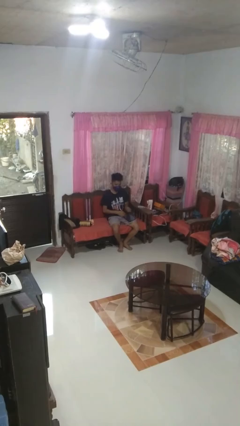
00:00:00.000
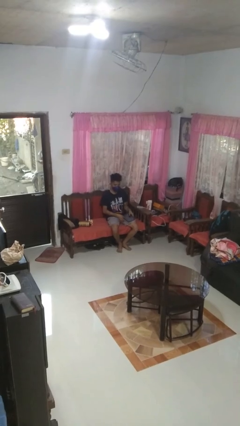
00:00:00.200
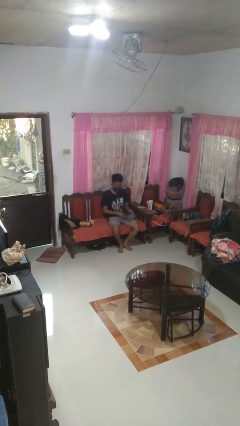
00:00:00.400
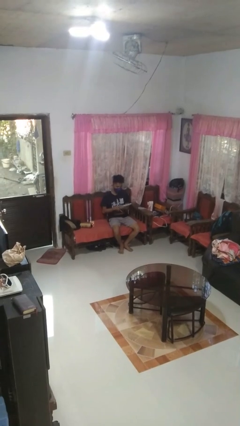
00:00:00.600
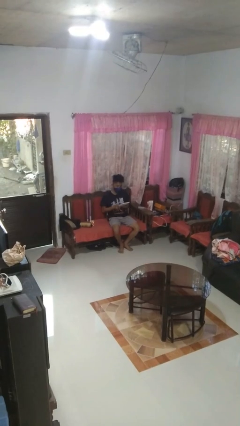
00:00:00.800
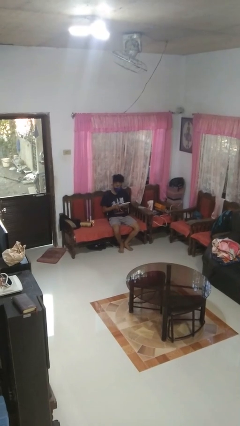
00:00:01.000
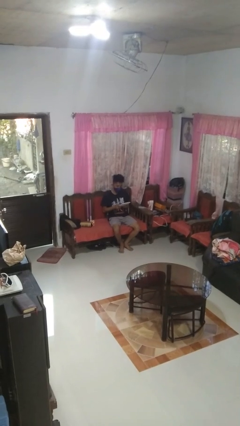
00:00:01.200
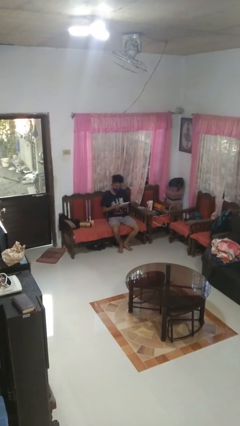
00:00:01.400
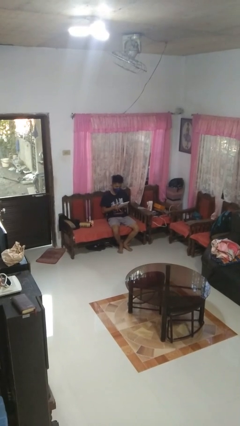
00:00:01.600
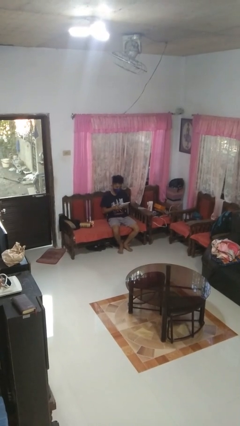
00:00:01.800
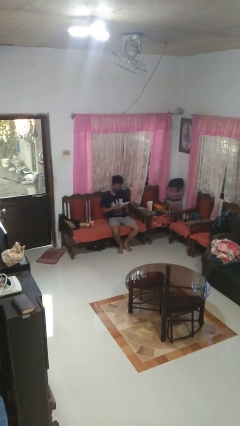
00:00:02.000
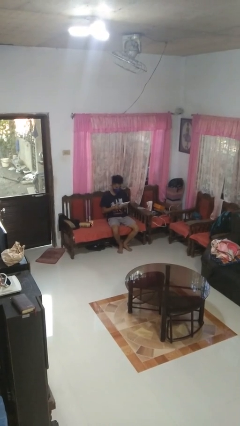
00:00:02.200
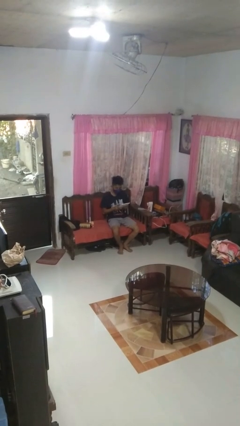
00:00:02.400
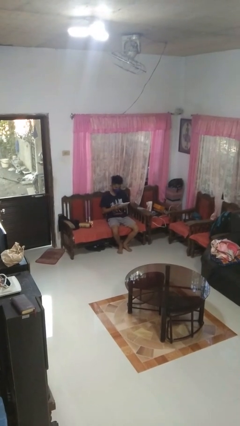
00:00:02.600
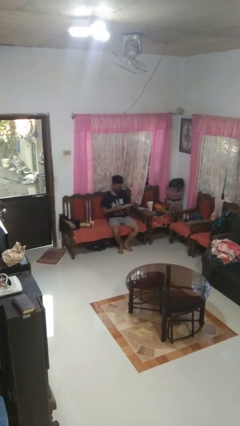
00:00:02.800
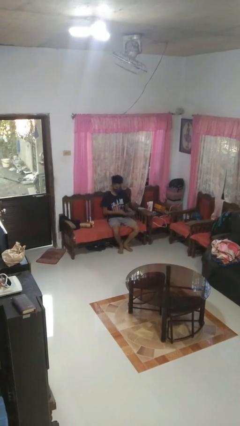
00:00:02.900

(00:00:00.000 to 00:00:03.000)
person interacts with tablet

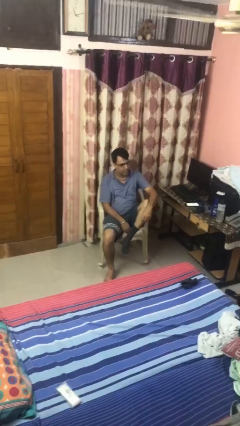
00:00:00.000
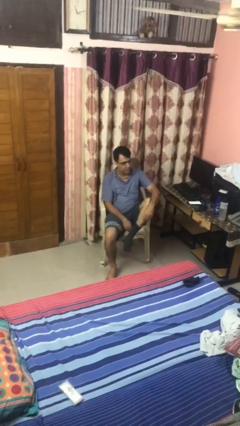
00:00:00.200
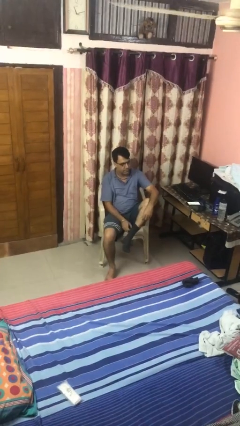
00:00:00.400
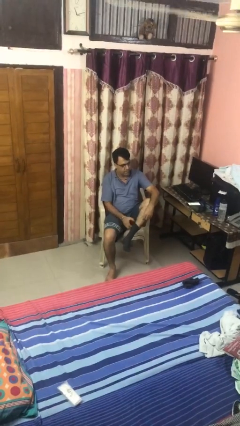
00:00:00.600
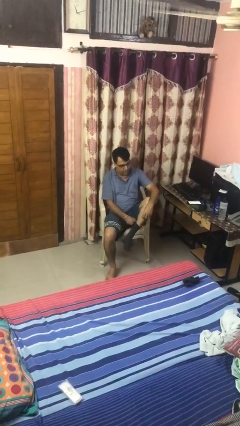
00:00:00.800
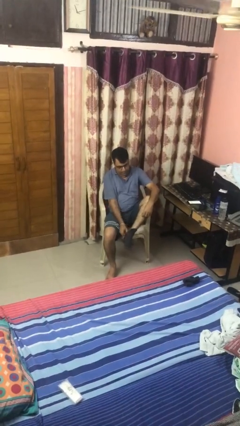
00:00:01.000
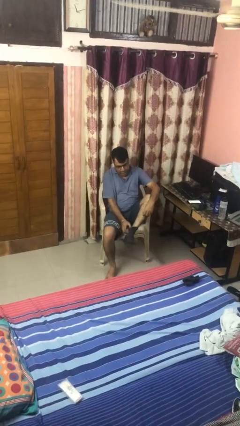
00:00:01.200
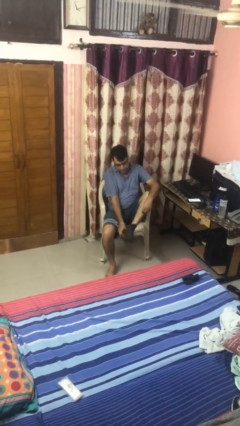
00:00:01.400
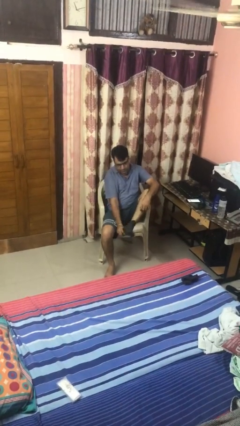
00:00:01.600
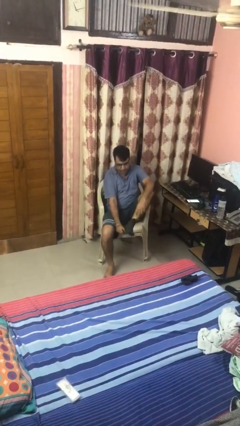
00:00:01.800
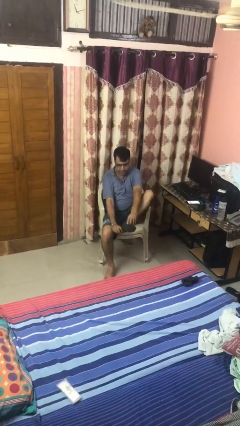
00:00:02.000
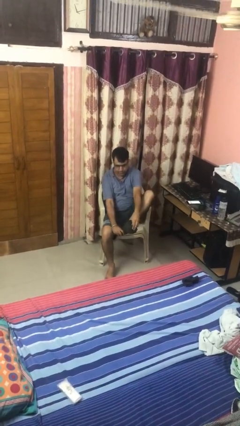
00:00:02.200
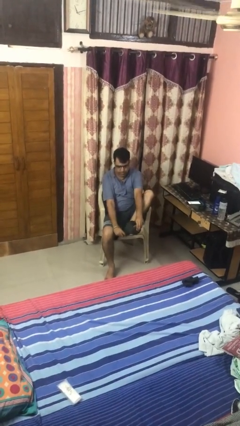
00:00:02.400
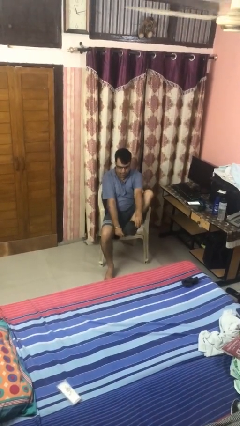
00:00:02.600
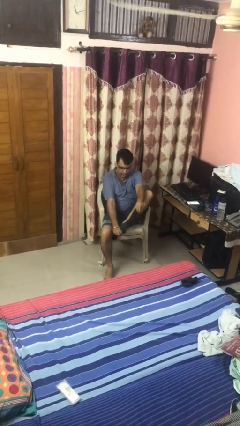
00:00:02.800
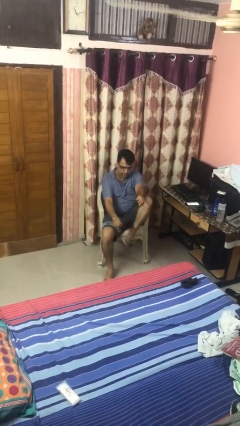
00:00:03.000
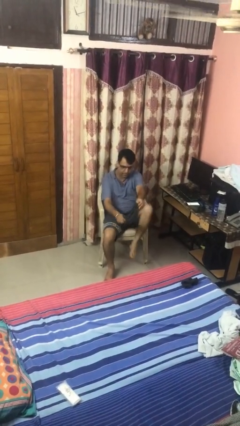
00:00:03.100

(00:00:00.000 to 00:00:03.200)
person takes off socks

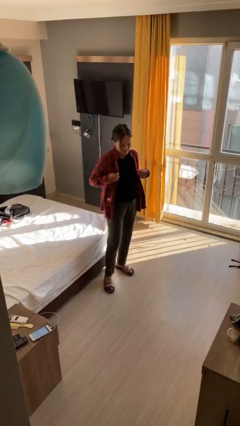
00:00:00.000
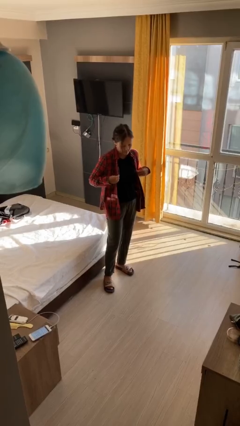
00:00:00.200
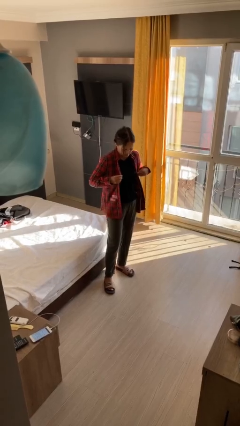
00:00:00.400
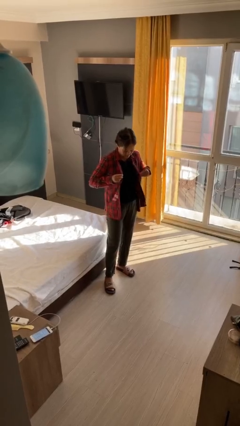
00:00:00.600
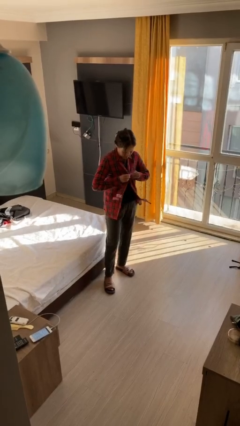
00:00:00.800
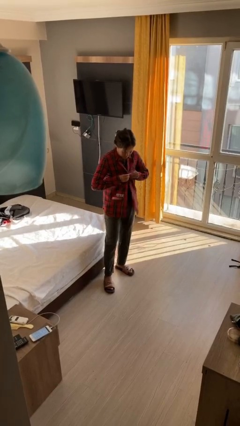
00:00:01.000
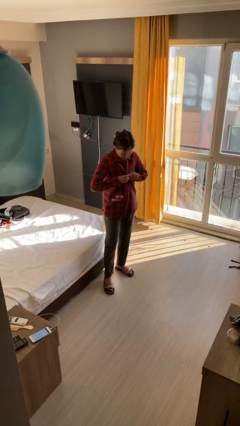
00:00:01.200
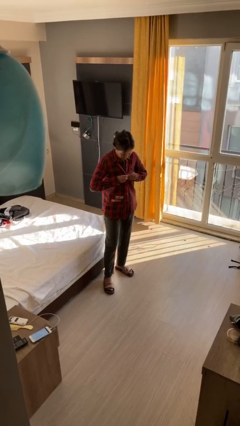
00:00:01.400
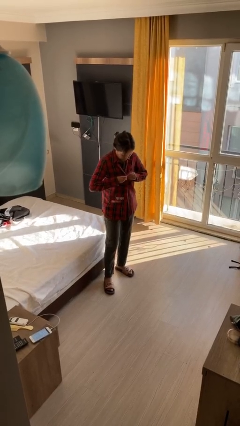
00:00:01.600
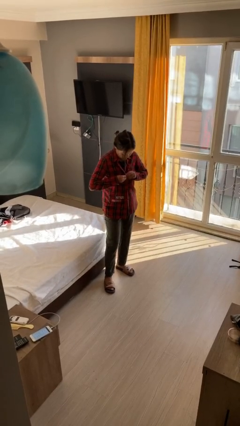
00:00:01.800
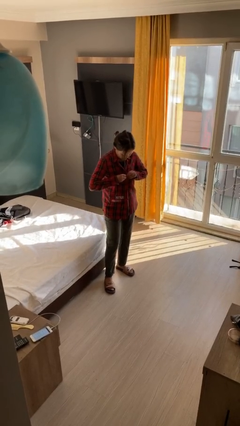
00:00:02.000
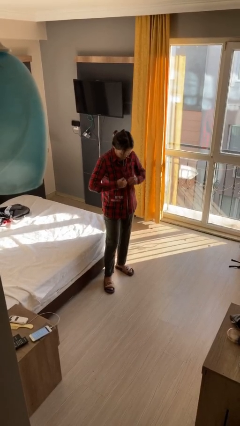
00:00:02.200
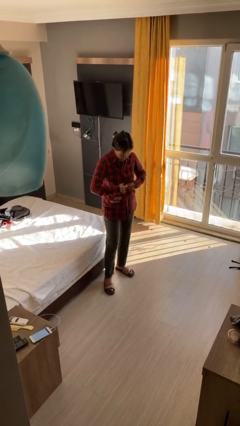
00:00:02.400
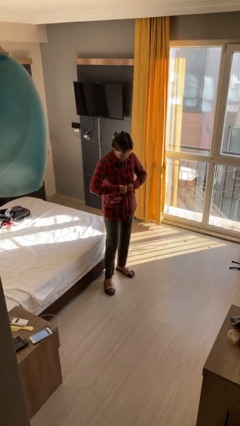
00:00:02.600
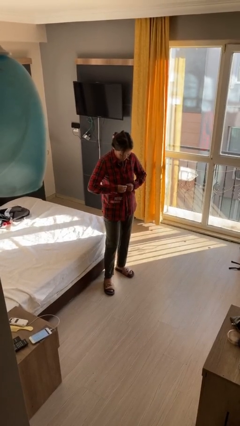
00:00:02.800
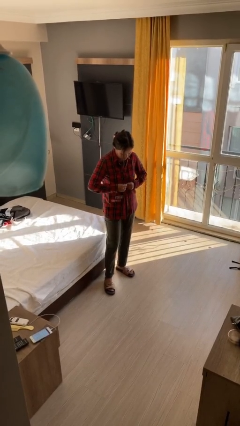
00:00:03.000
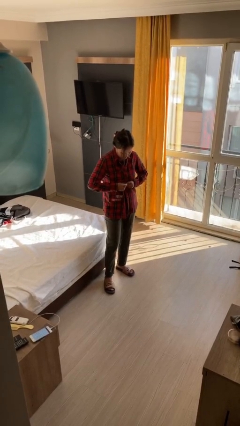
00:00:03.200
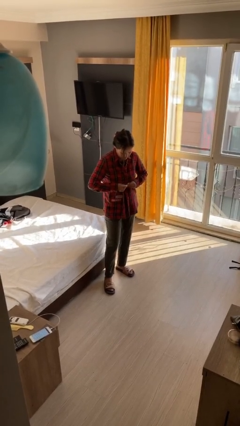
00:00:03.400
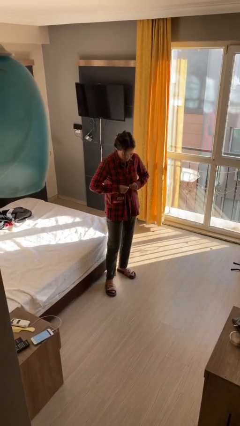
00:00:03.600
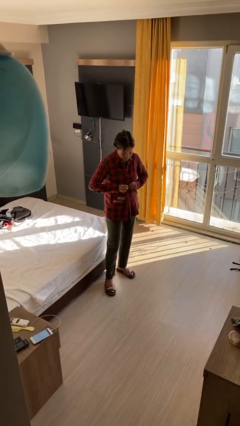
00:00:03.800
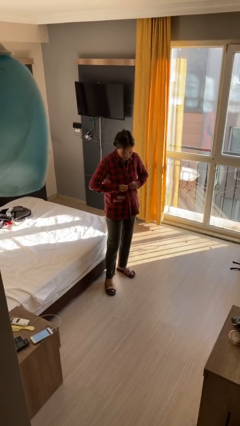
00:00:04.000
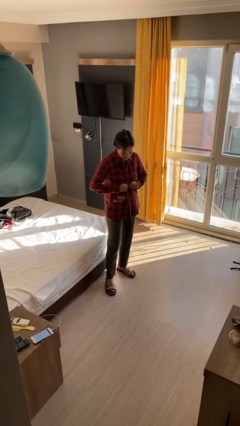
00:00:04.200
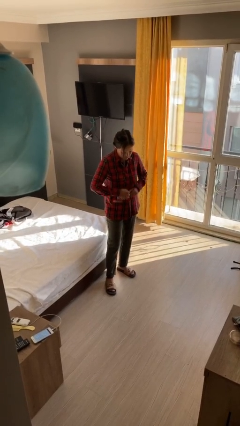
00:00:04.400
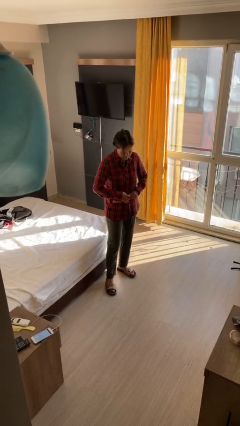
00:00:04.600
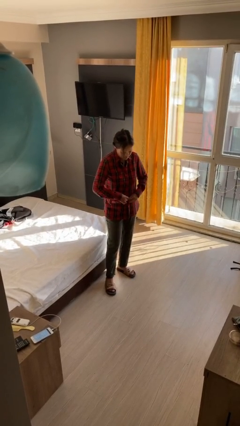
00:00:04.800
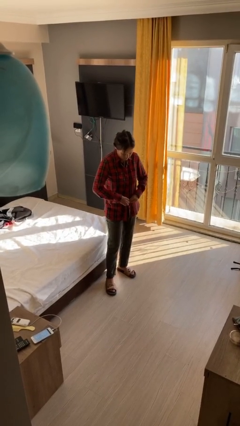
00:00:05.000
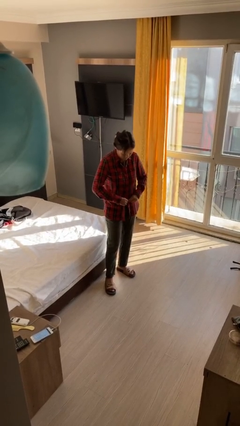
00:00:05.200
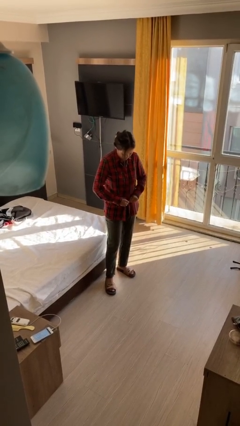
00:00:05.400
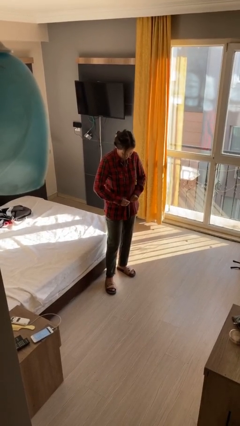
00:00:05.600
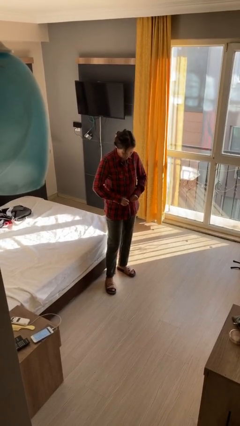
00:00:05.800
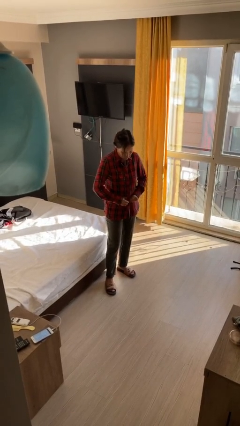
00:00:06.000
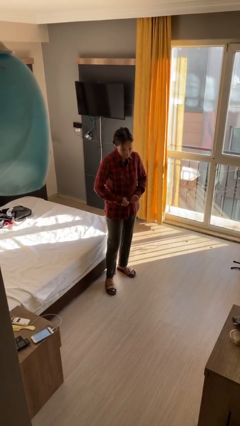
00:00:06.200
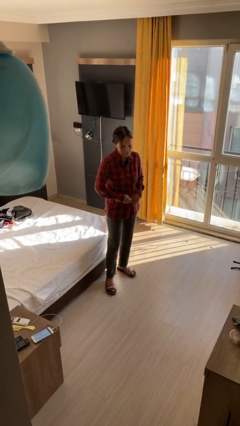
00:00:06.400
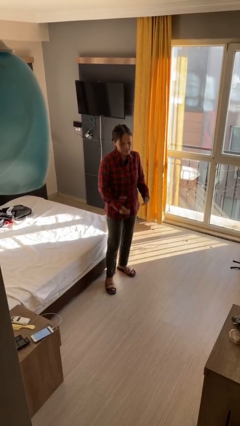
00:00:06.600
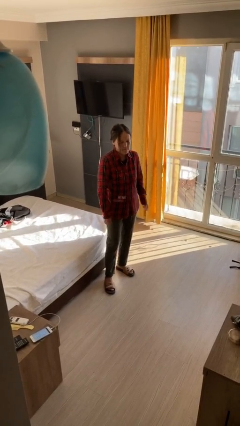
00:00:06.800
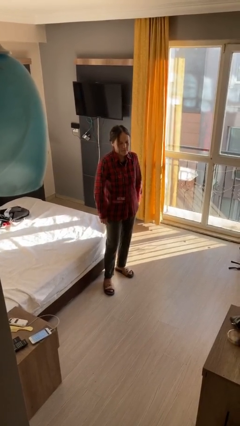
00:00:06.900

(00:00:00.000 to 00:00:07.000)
person buttons shirt

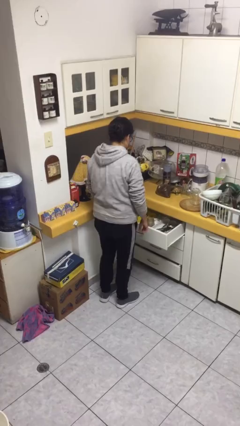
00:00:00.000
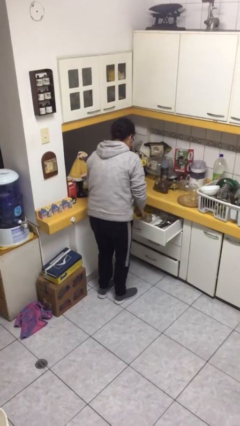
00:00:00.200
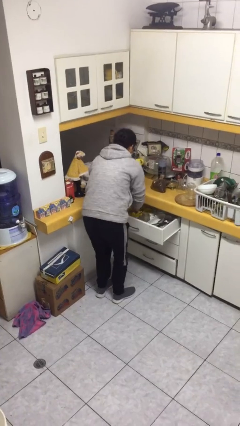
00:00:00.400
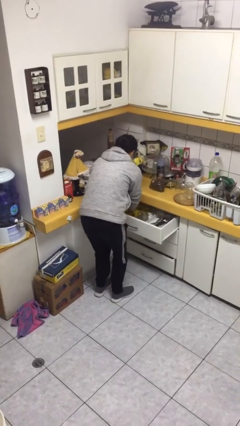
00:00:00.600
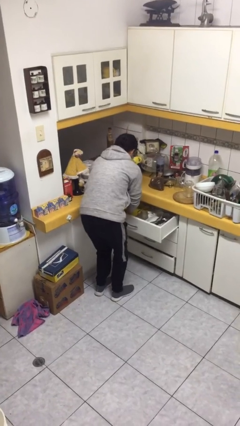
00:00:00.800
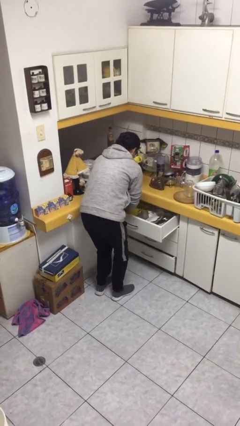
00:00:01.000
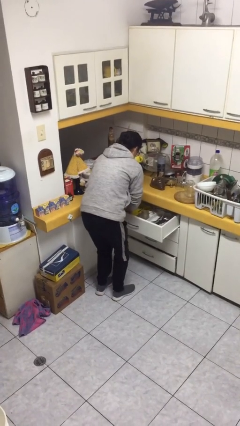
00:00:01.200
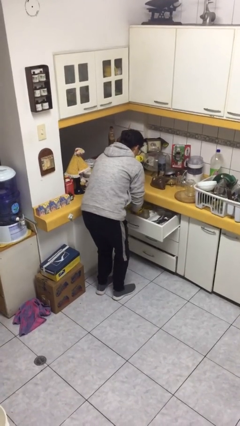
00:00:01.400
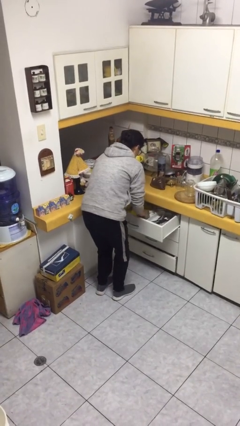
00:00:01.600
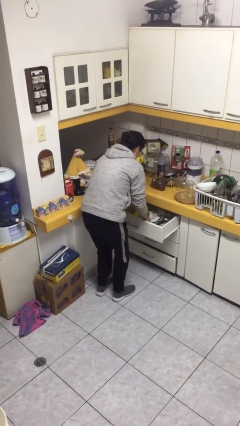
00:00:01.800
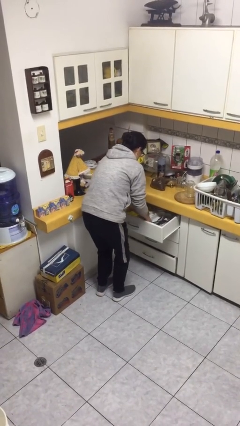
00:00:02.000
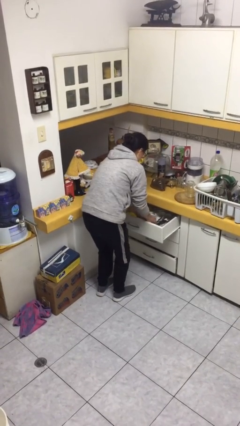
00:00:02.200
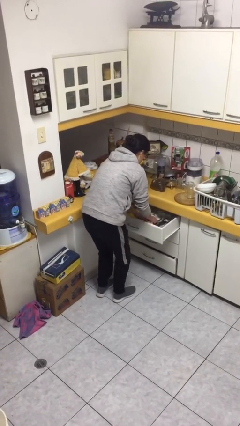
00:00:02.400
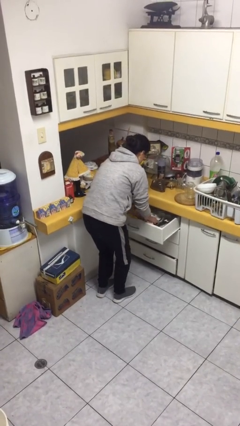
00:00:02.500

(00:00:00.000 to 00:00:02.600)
person searches in kitchen drawer

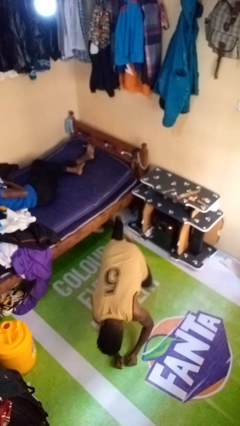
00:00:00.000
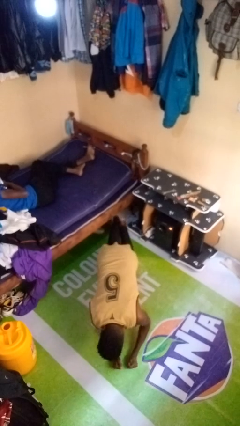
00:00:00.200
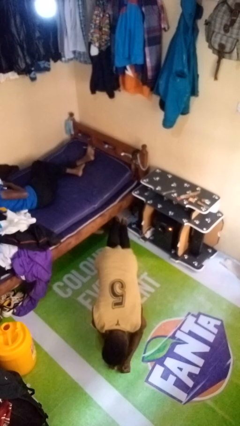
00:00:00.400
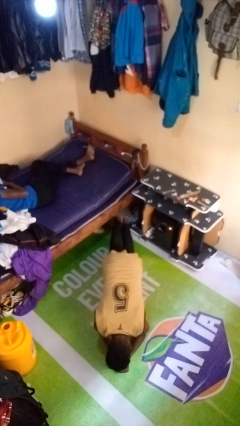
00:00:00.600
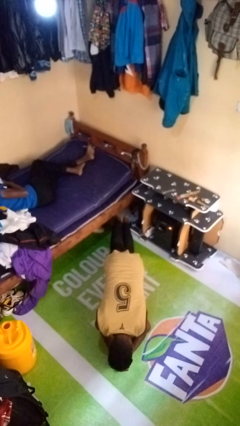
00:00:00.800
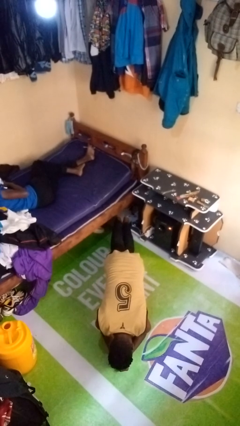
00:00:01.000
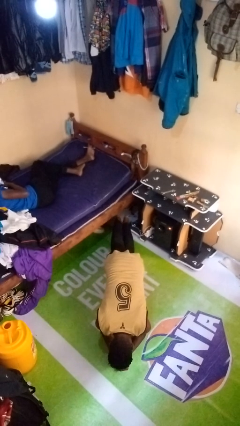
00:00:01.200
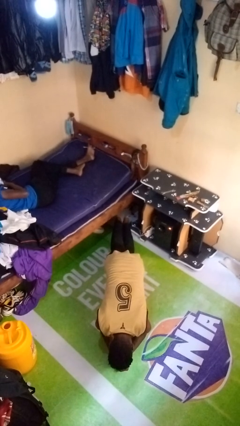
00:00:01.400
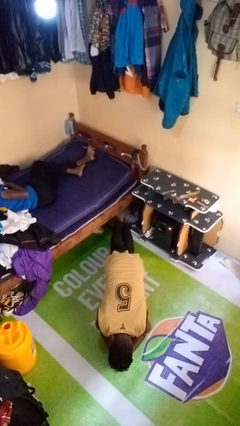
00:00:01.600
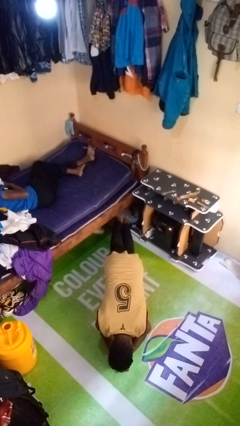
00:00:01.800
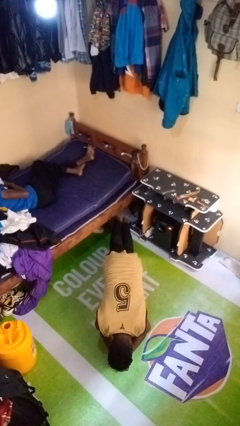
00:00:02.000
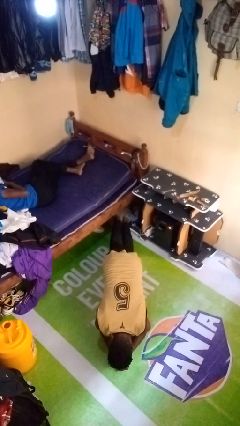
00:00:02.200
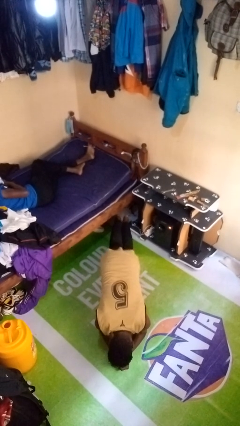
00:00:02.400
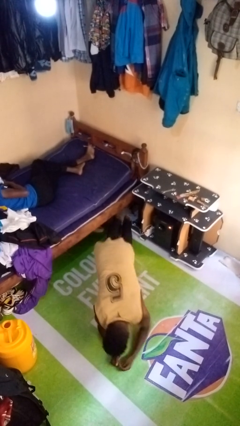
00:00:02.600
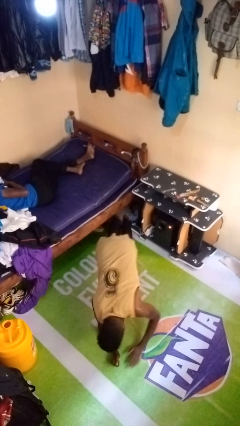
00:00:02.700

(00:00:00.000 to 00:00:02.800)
person exercises with plank
